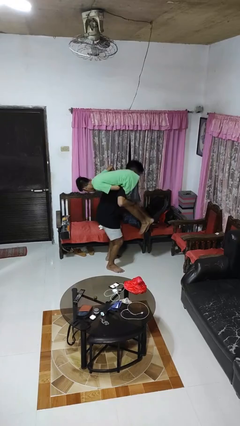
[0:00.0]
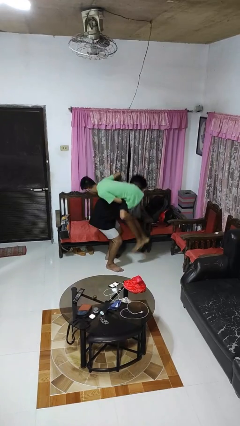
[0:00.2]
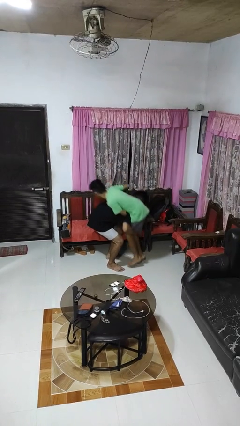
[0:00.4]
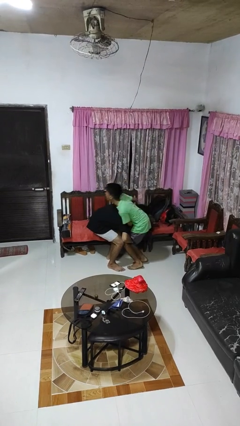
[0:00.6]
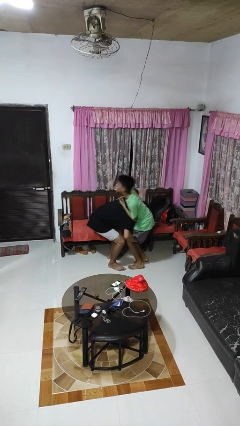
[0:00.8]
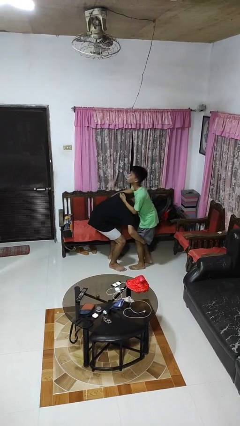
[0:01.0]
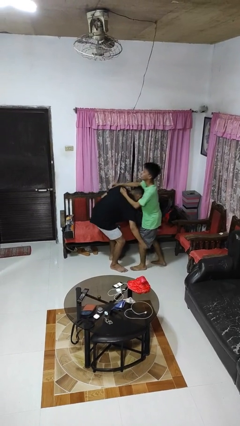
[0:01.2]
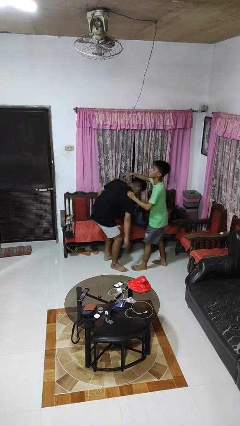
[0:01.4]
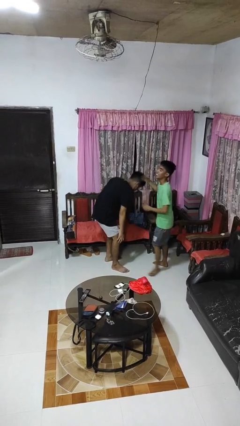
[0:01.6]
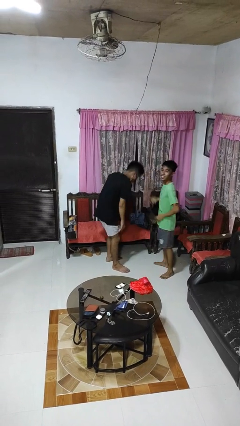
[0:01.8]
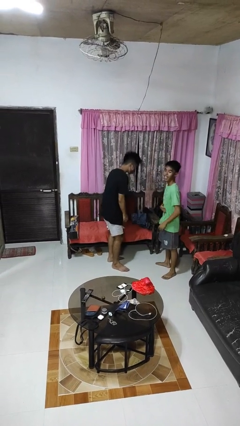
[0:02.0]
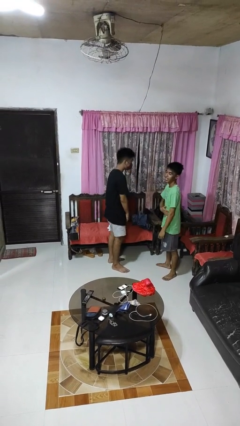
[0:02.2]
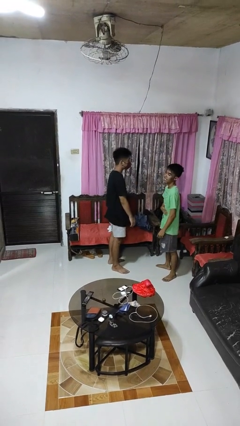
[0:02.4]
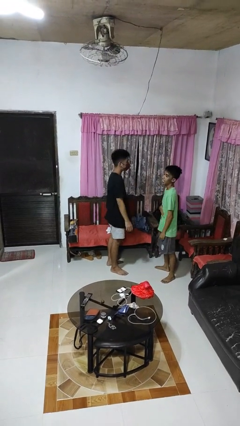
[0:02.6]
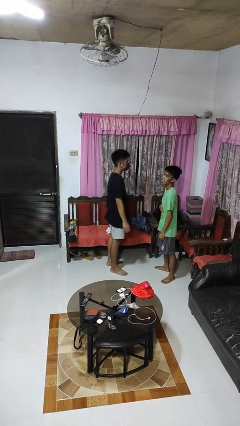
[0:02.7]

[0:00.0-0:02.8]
person puts down person

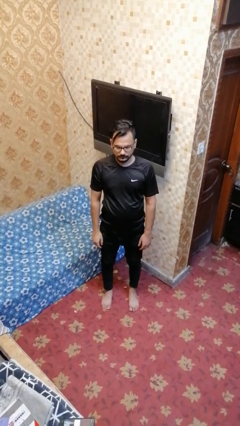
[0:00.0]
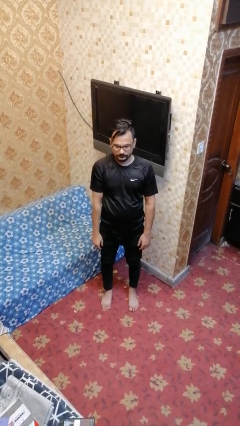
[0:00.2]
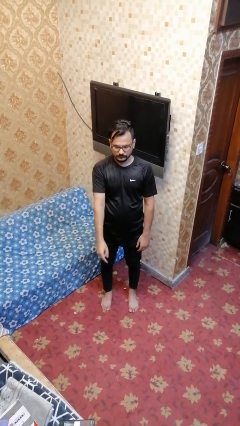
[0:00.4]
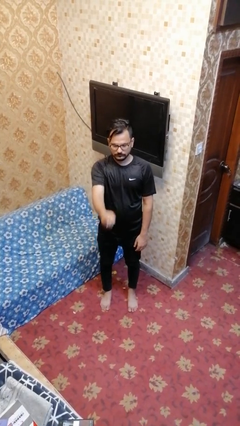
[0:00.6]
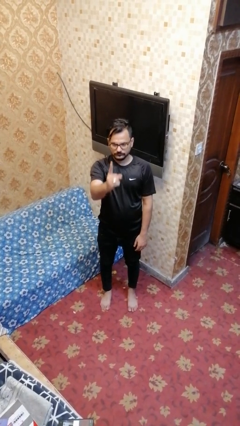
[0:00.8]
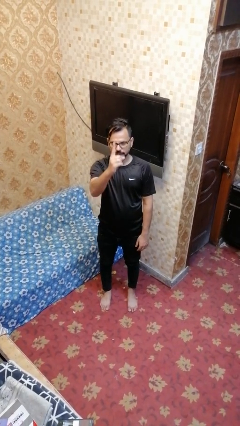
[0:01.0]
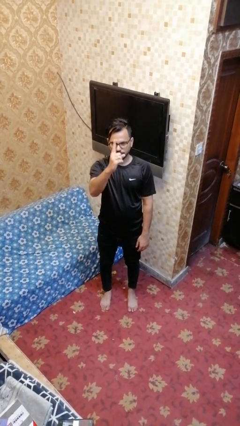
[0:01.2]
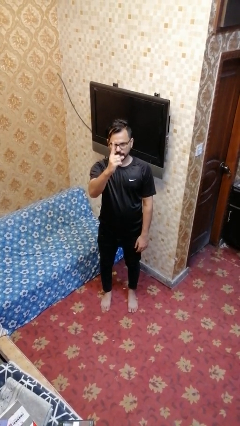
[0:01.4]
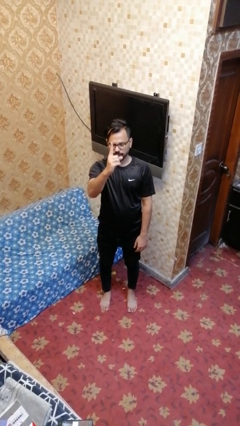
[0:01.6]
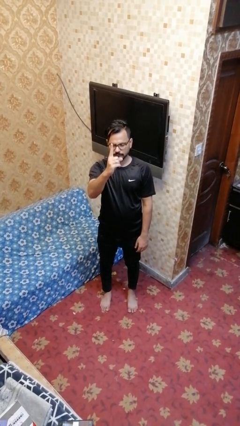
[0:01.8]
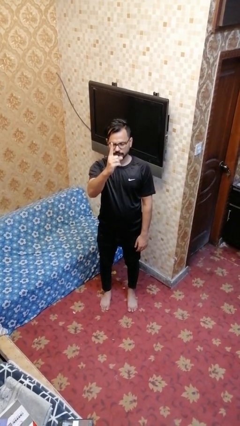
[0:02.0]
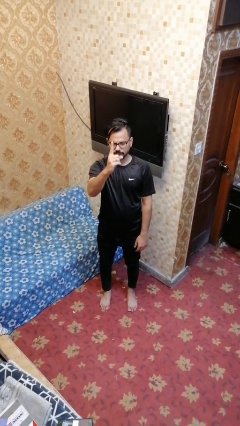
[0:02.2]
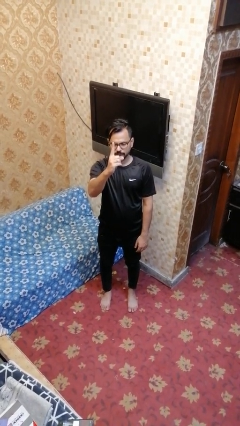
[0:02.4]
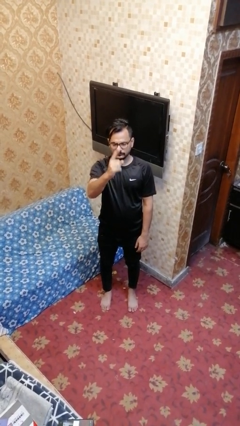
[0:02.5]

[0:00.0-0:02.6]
person gestures number one

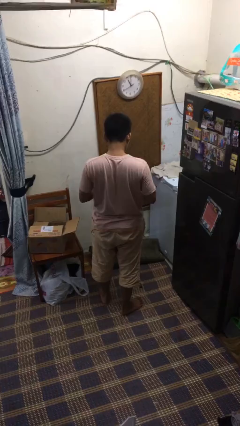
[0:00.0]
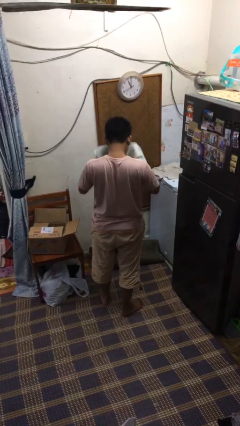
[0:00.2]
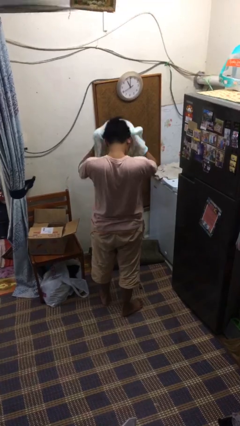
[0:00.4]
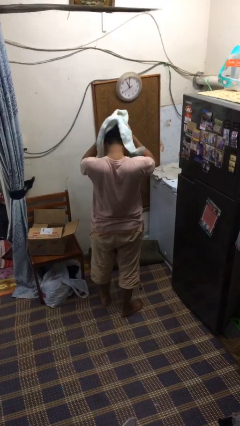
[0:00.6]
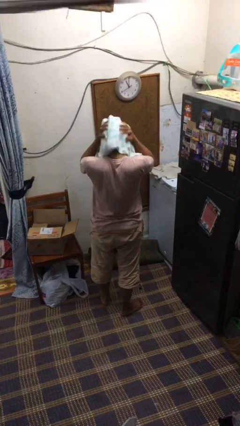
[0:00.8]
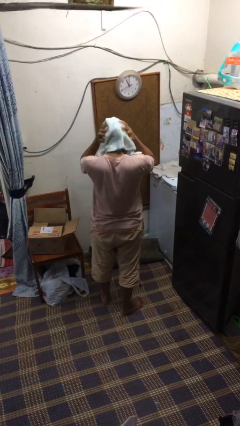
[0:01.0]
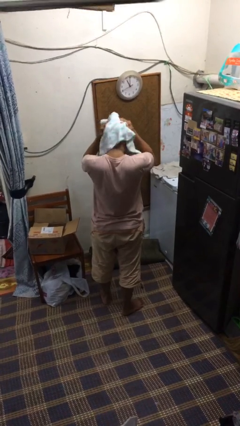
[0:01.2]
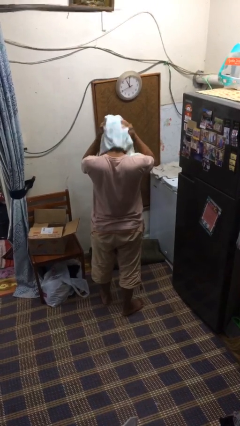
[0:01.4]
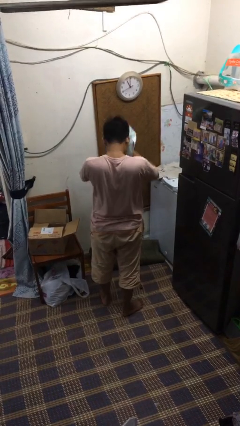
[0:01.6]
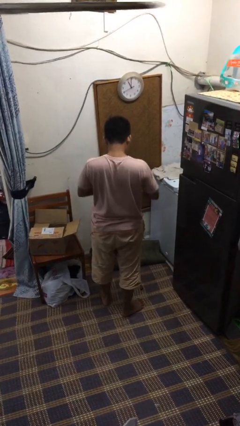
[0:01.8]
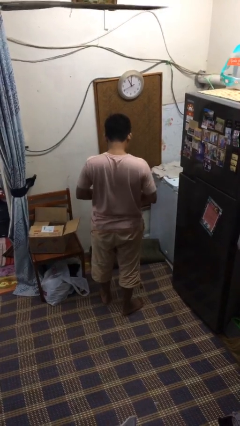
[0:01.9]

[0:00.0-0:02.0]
person dries hair with towel

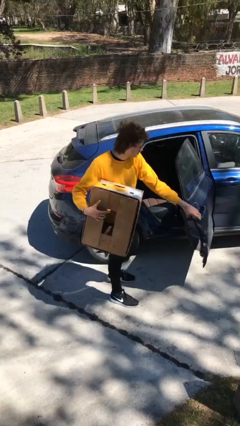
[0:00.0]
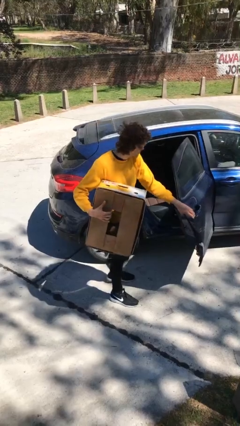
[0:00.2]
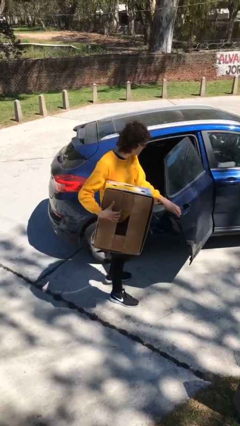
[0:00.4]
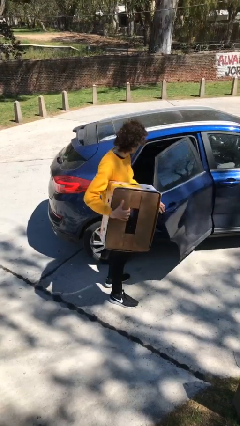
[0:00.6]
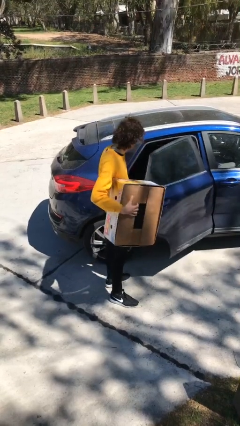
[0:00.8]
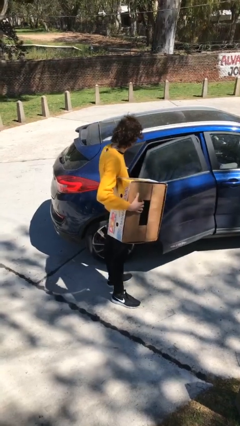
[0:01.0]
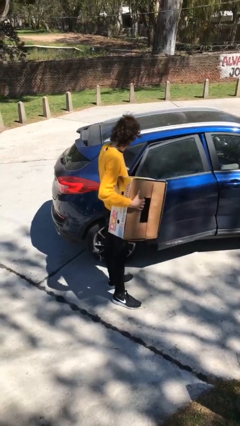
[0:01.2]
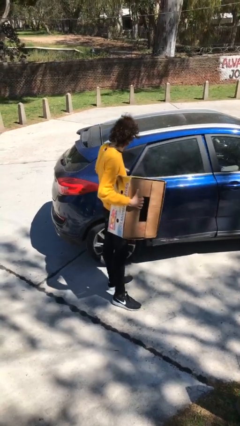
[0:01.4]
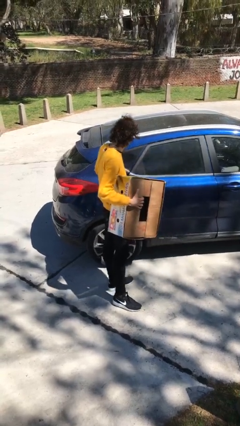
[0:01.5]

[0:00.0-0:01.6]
person closes car door

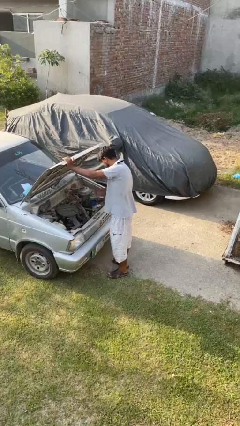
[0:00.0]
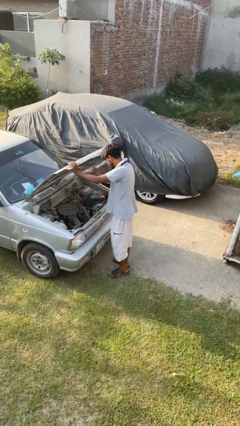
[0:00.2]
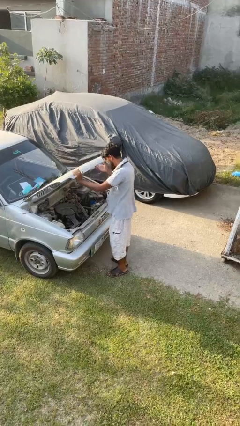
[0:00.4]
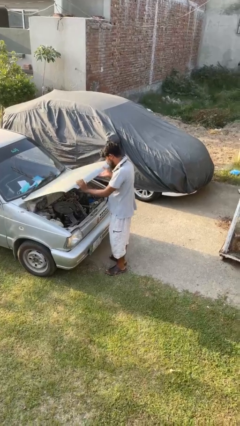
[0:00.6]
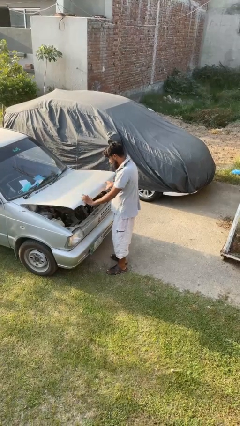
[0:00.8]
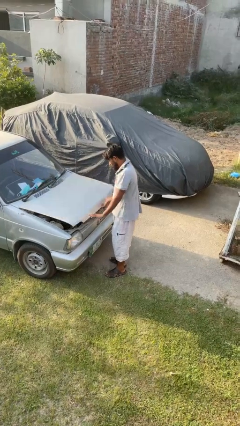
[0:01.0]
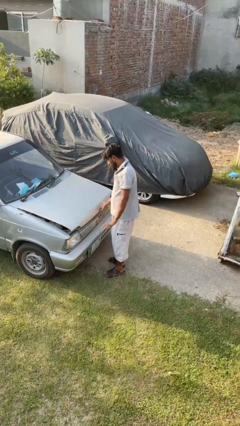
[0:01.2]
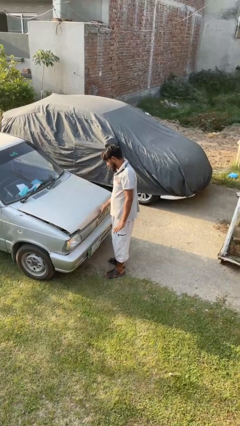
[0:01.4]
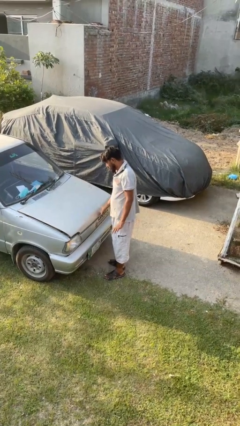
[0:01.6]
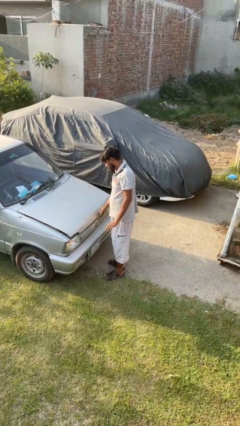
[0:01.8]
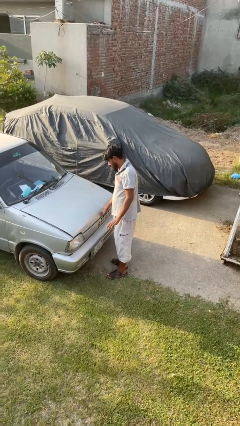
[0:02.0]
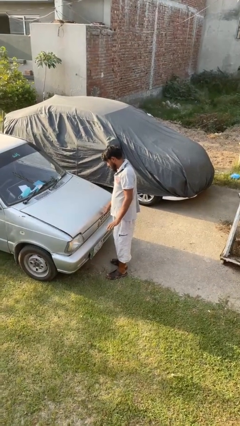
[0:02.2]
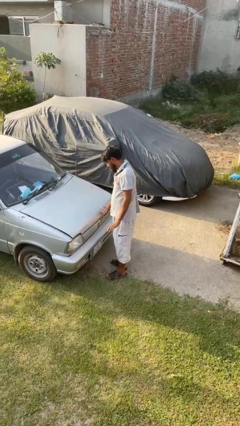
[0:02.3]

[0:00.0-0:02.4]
person closes car hood

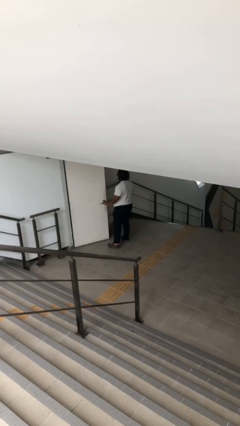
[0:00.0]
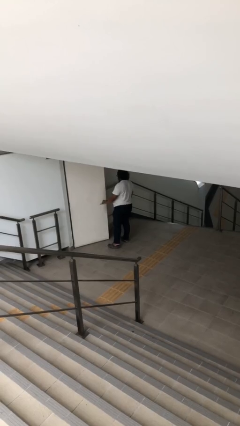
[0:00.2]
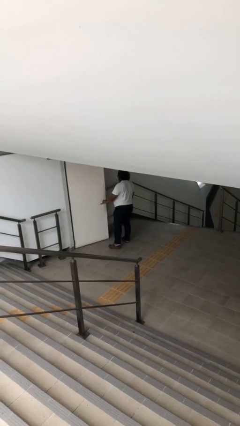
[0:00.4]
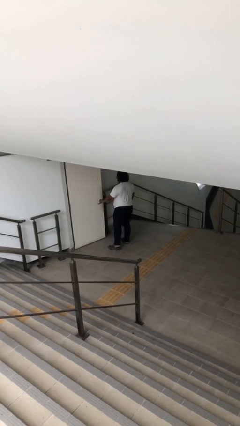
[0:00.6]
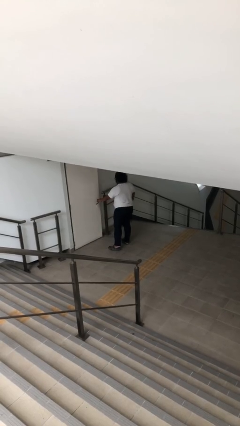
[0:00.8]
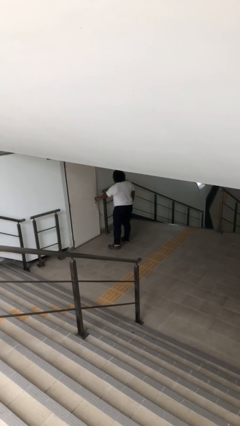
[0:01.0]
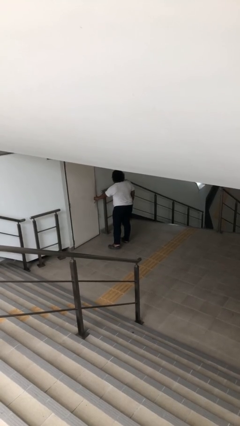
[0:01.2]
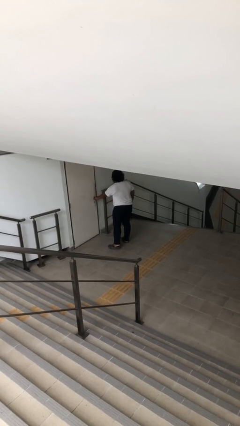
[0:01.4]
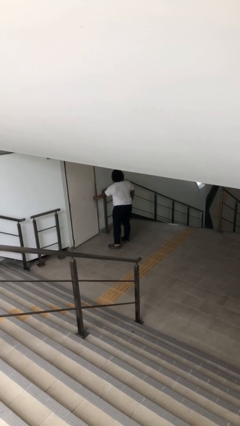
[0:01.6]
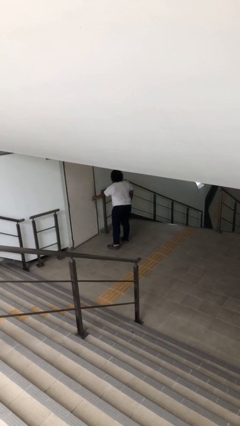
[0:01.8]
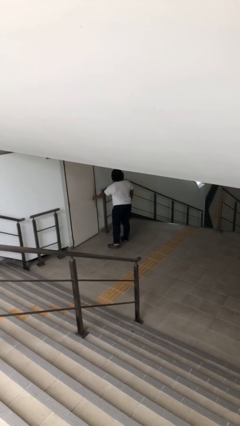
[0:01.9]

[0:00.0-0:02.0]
person closes facility door

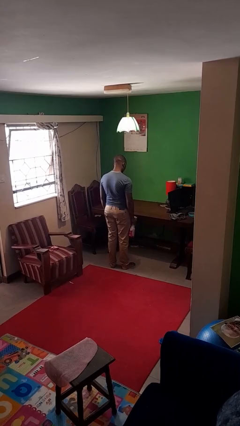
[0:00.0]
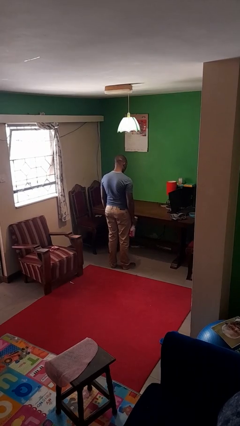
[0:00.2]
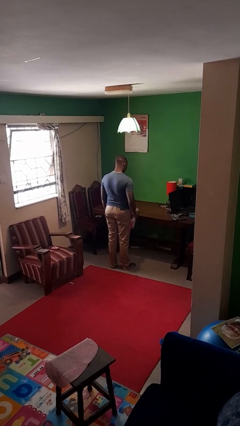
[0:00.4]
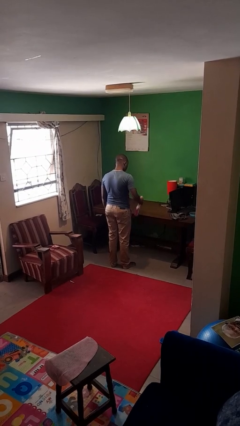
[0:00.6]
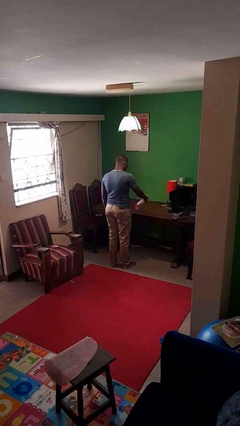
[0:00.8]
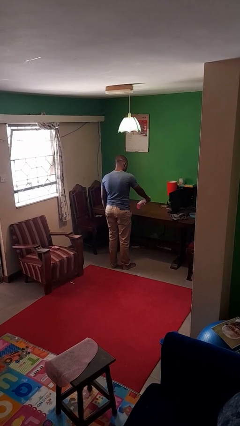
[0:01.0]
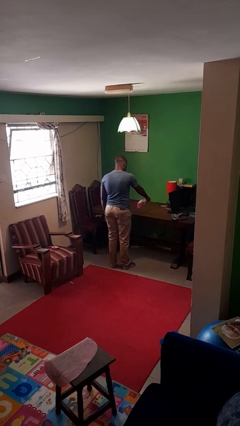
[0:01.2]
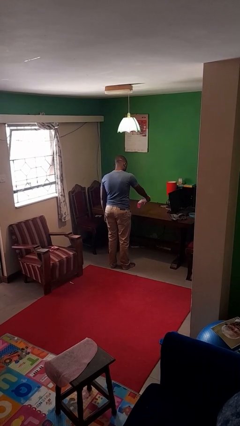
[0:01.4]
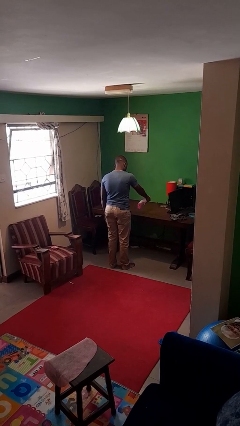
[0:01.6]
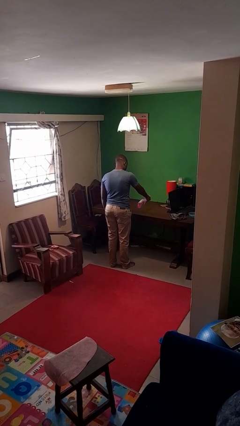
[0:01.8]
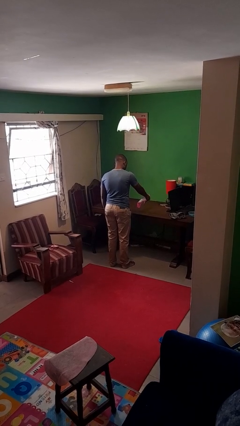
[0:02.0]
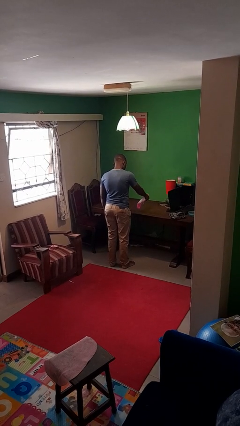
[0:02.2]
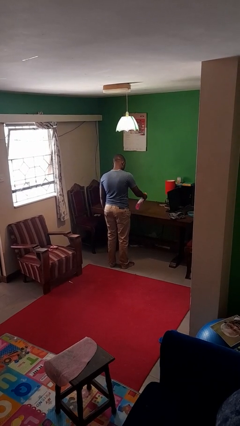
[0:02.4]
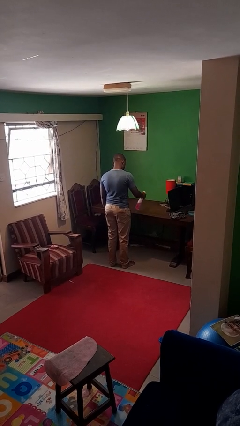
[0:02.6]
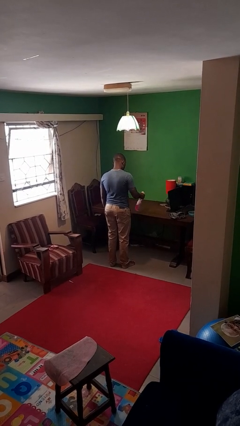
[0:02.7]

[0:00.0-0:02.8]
person sprays from bottle

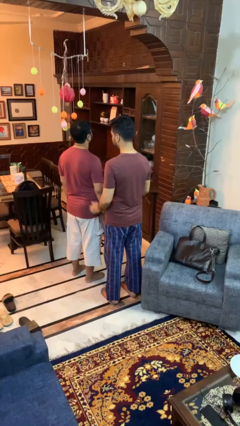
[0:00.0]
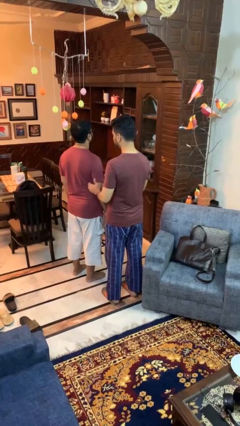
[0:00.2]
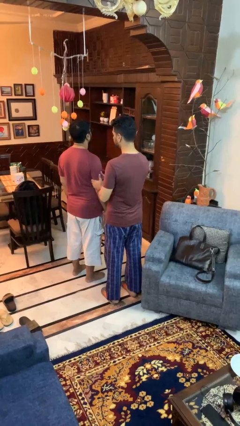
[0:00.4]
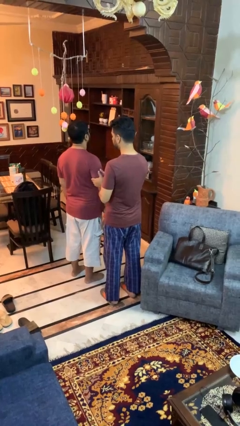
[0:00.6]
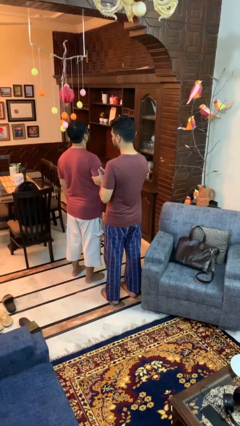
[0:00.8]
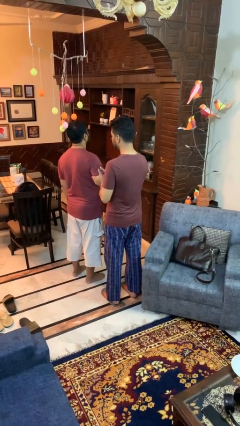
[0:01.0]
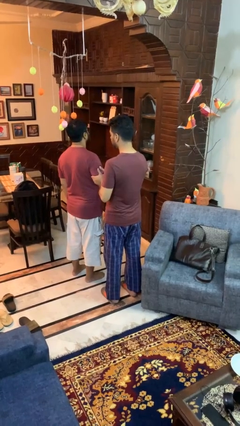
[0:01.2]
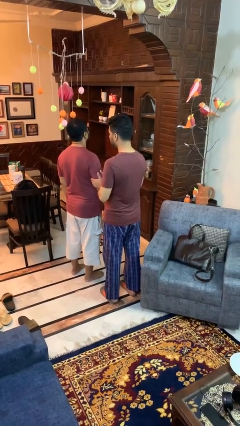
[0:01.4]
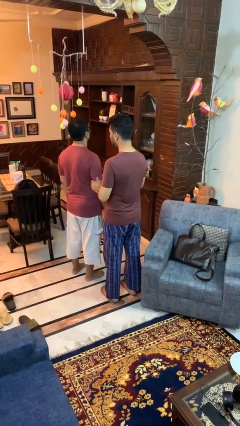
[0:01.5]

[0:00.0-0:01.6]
person grabs person by bicep
